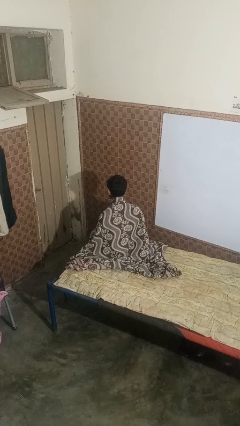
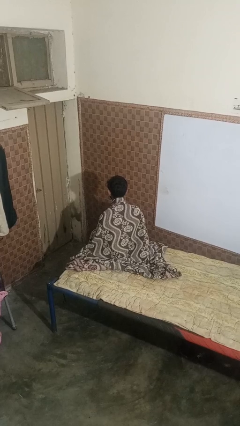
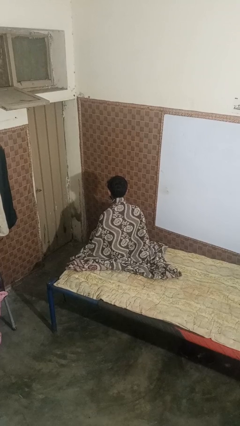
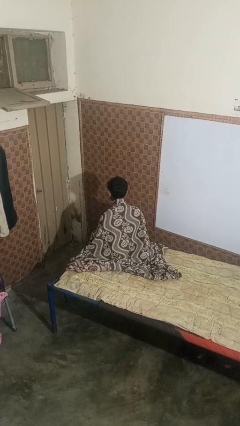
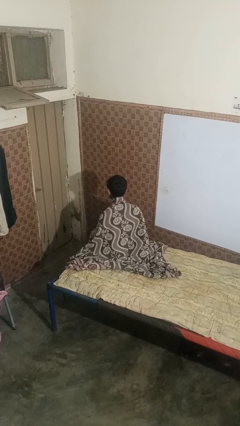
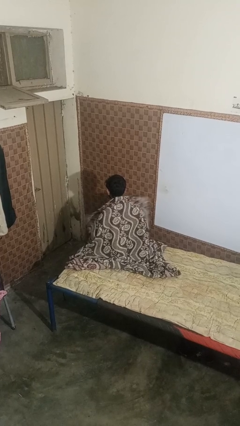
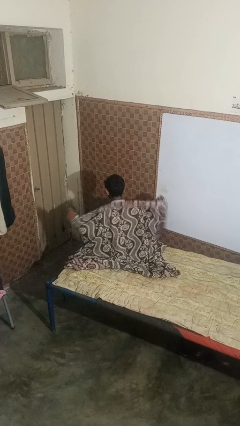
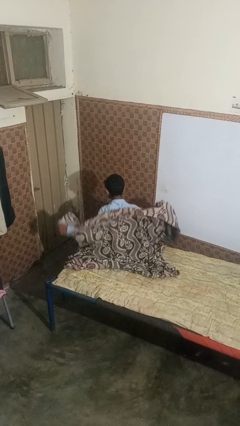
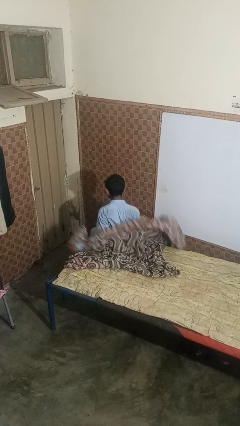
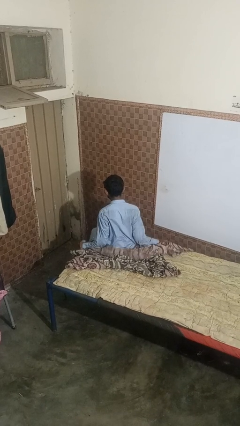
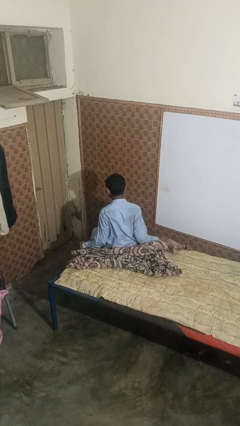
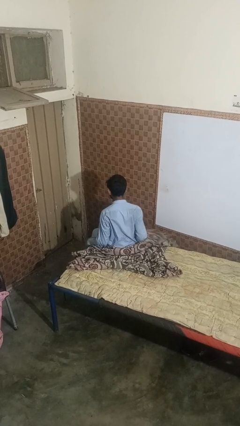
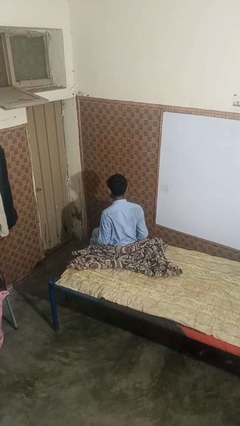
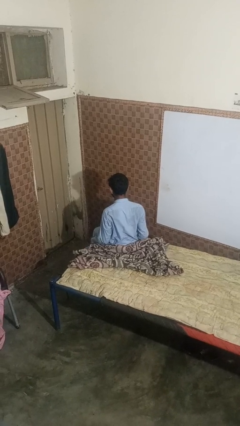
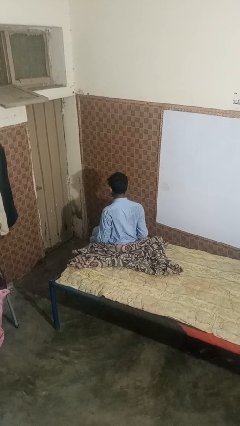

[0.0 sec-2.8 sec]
person uncovers with bedsheets

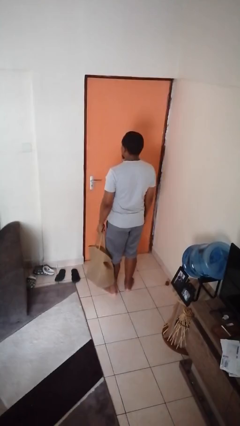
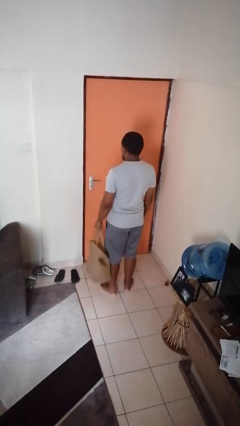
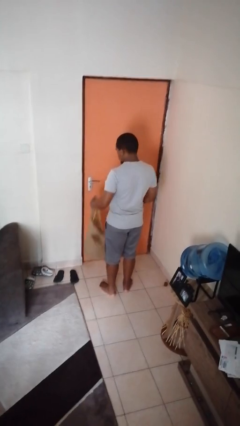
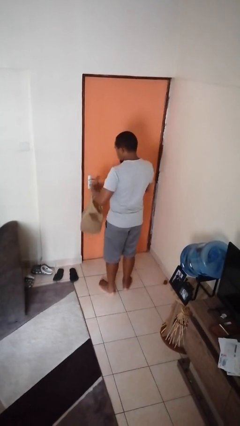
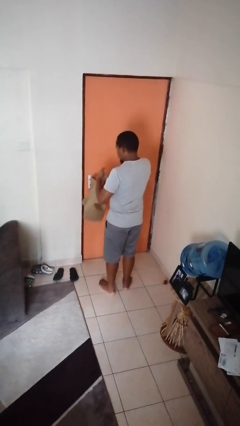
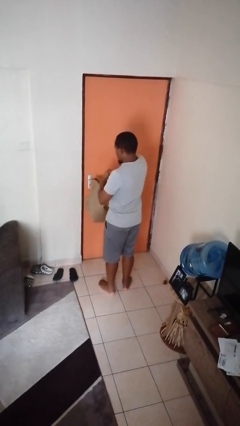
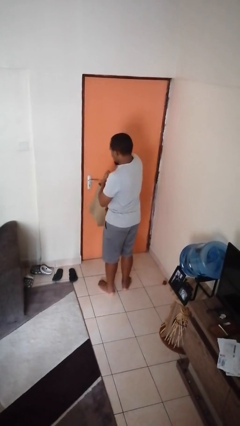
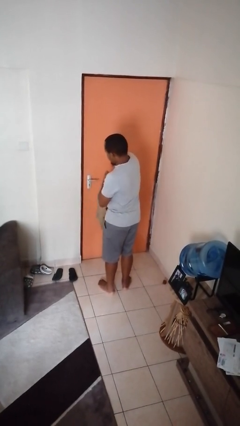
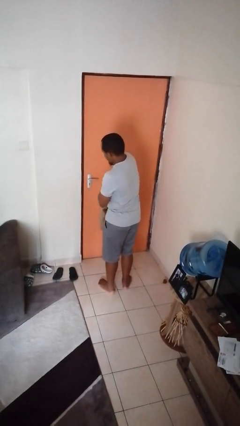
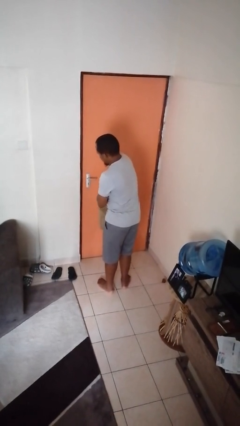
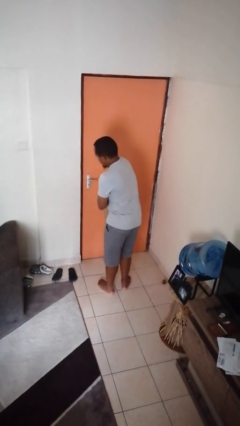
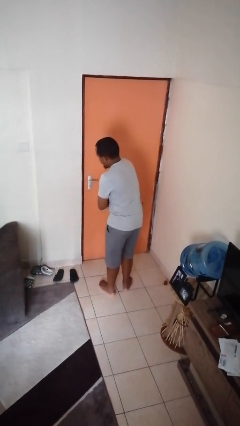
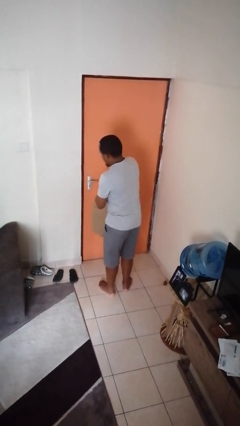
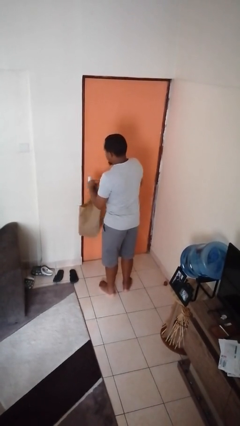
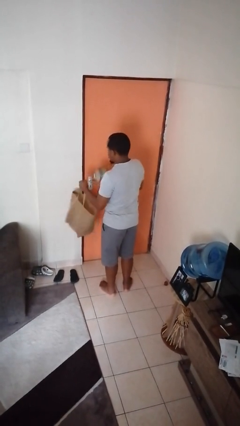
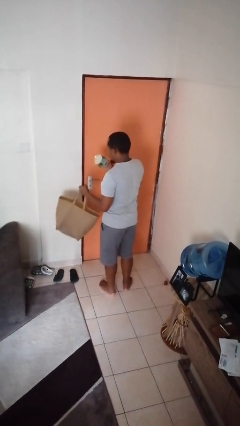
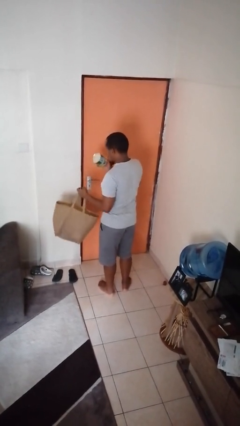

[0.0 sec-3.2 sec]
person takes object from bag

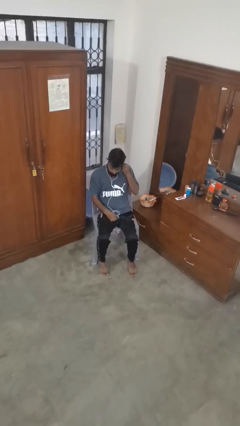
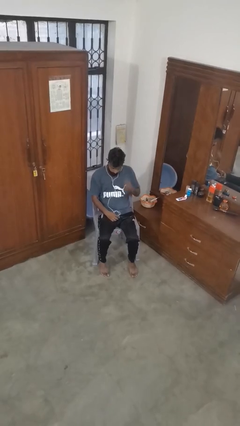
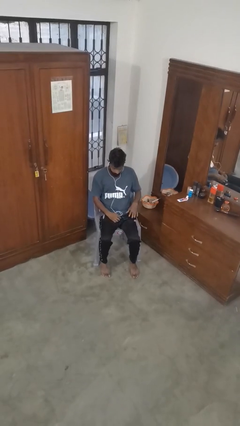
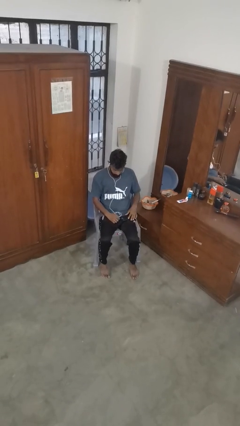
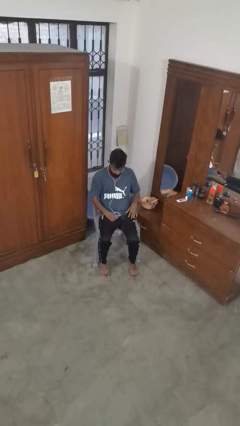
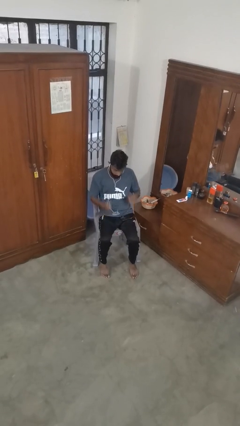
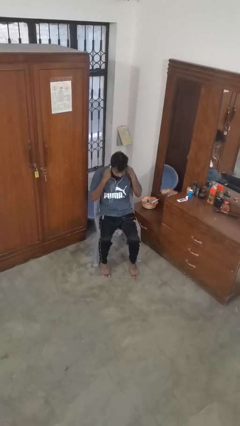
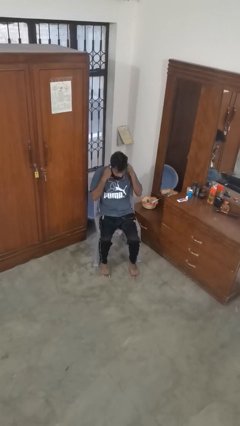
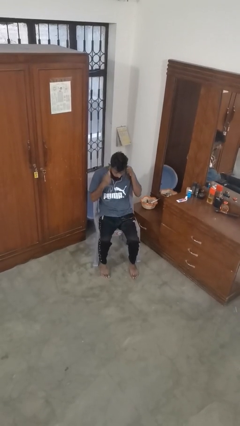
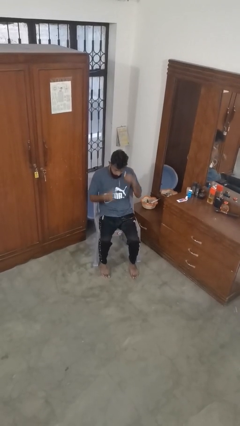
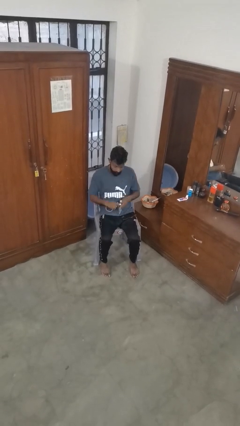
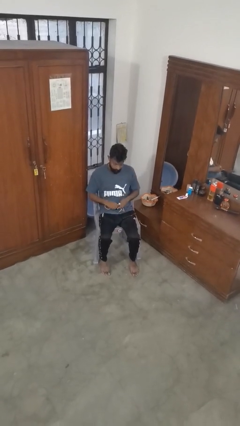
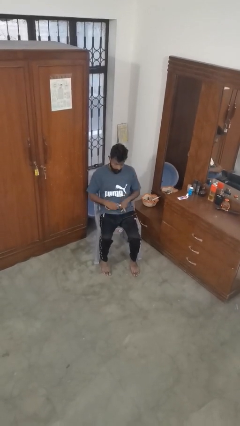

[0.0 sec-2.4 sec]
person takes off headphones

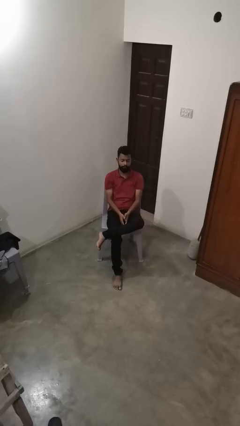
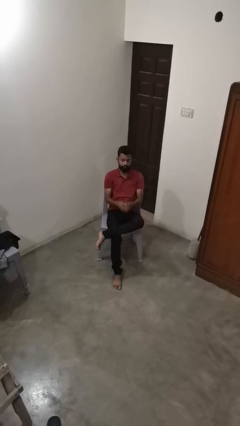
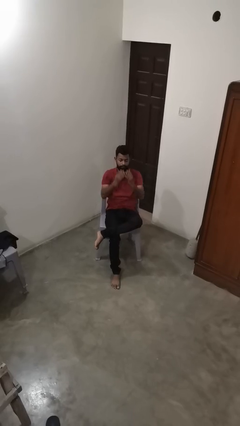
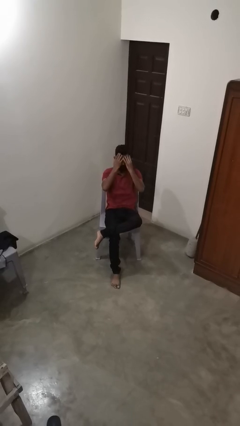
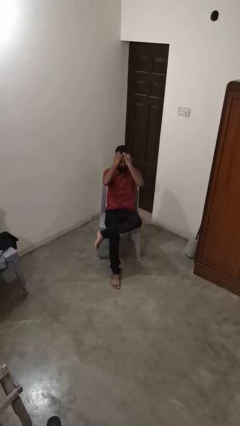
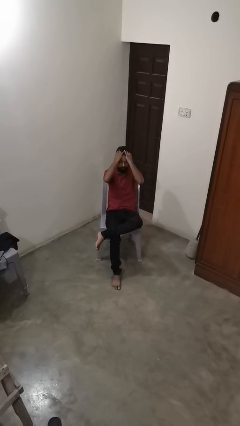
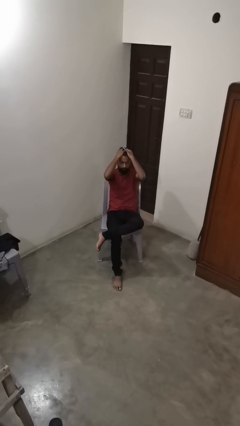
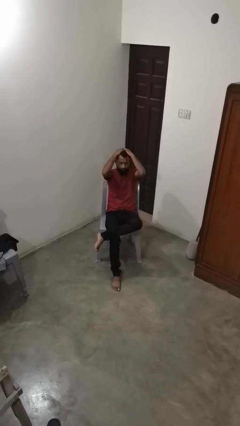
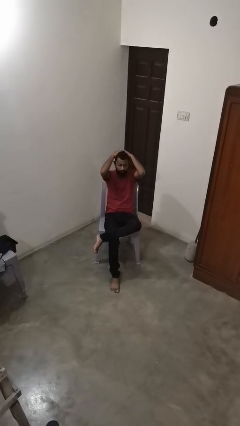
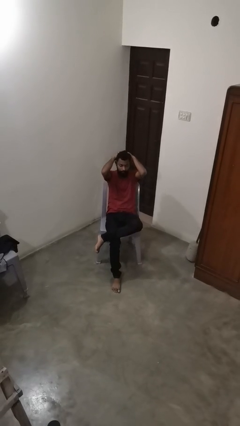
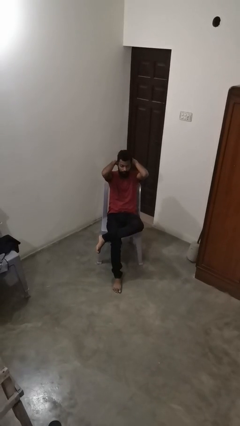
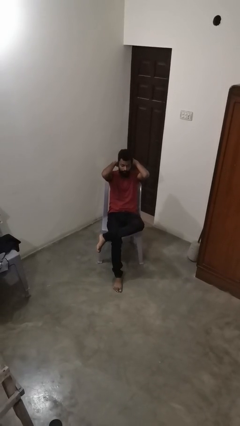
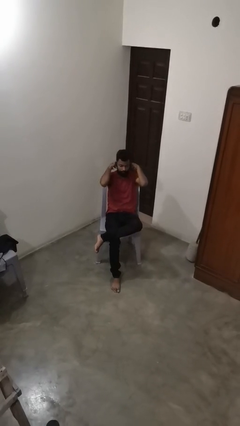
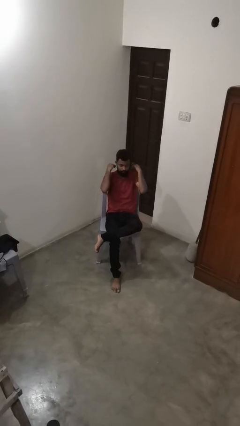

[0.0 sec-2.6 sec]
person strokes hair

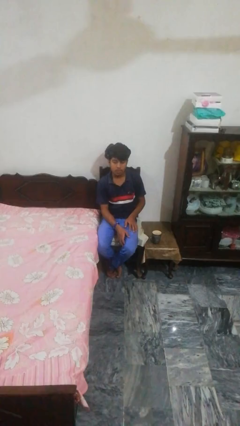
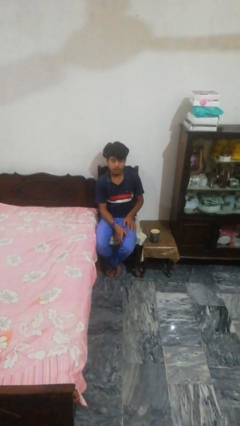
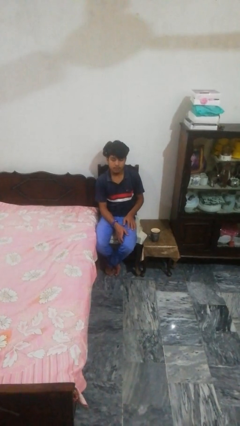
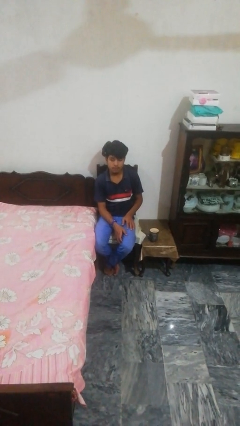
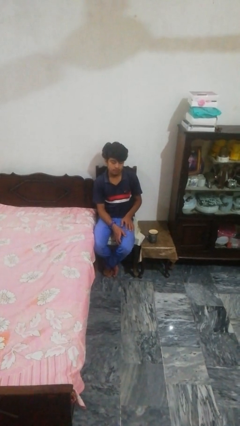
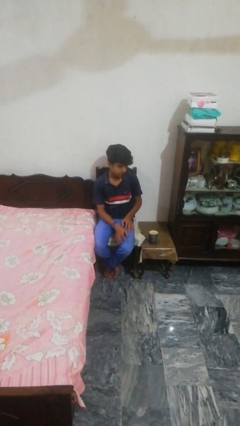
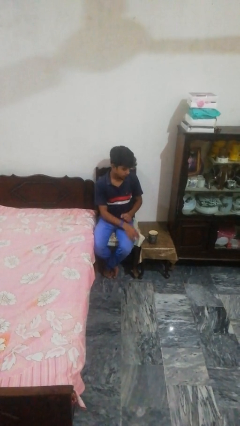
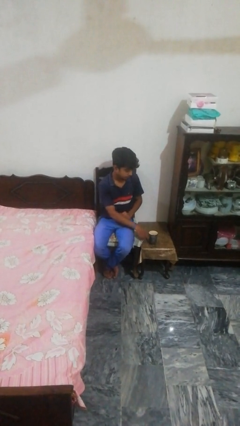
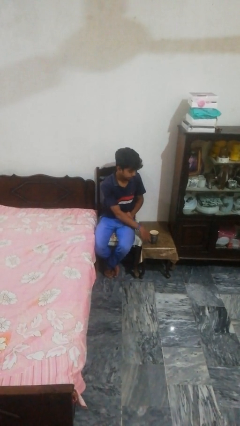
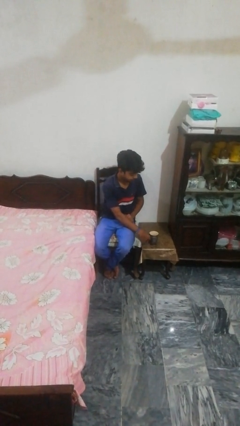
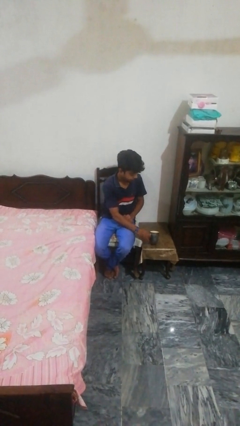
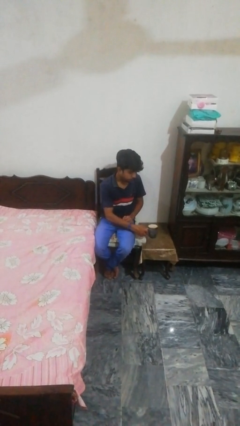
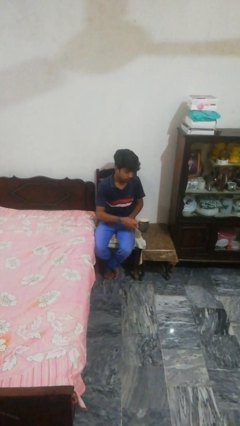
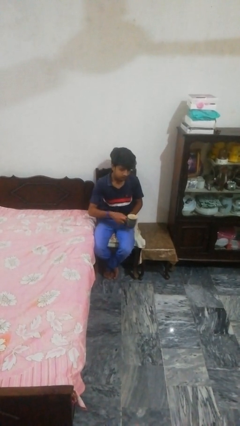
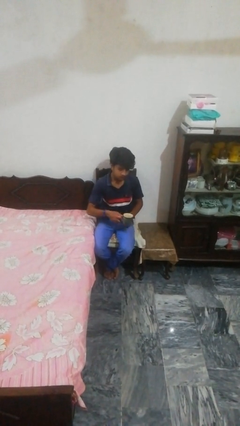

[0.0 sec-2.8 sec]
person picks up object from table

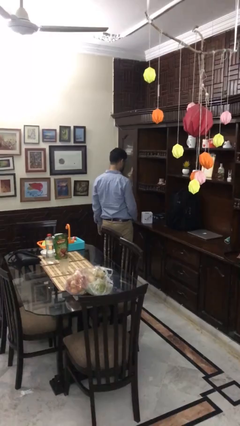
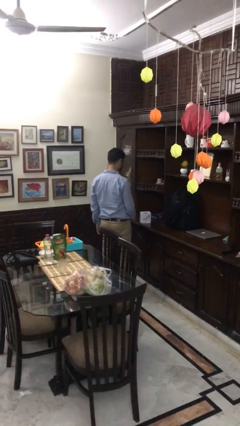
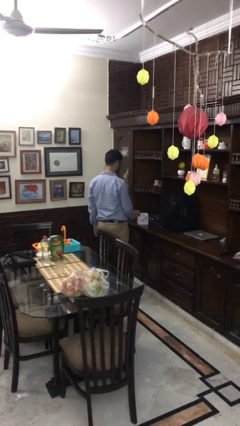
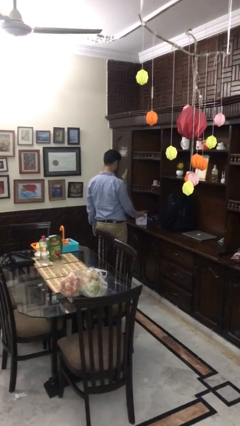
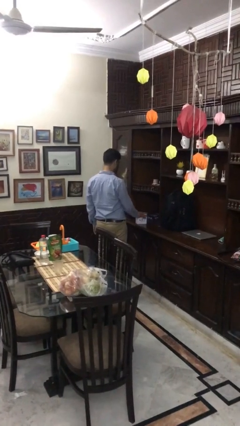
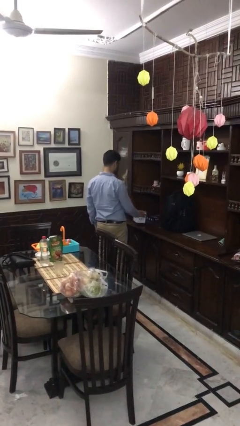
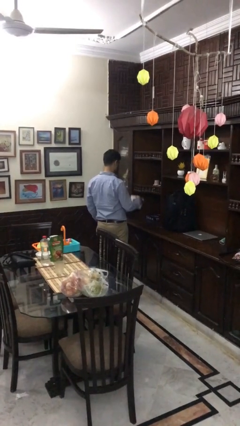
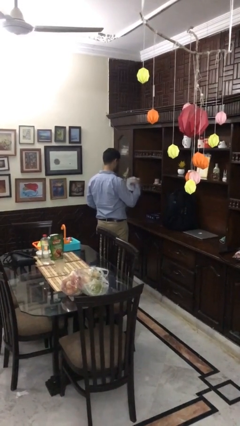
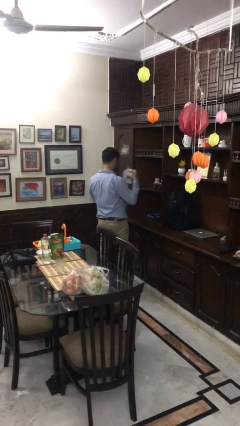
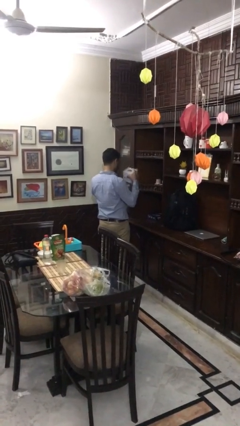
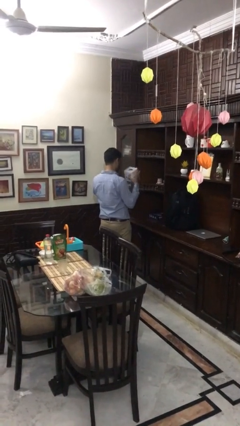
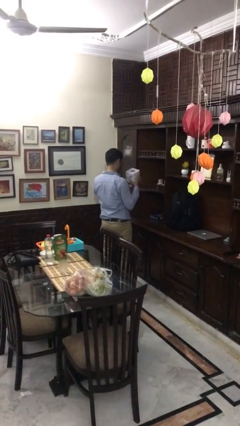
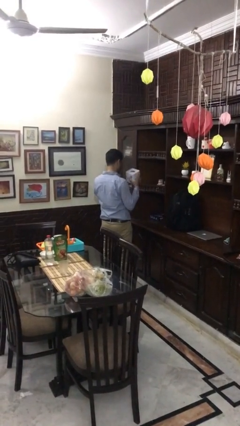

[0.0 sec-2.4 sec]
person picks up object from countertop

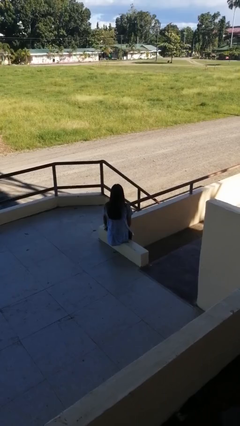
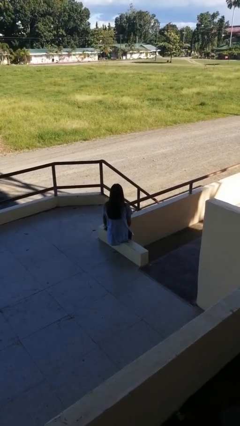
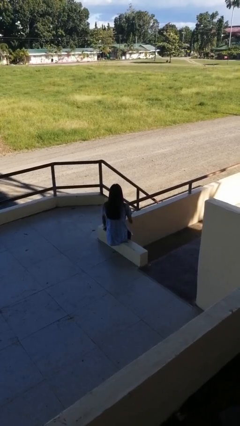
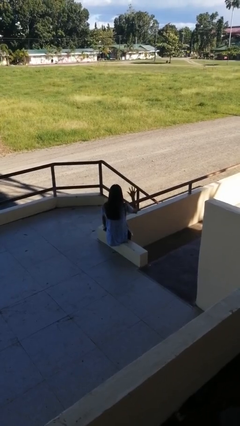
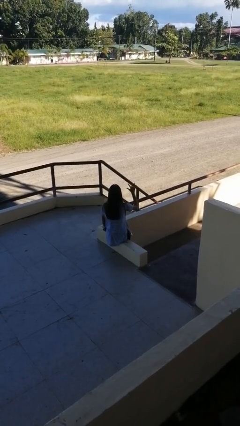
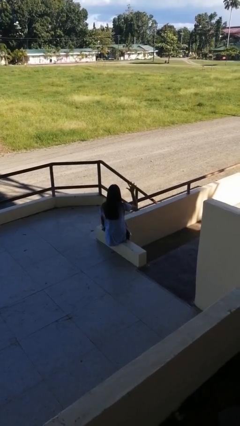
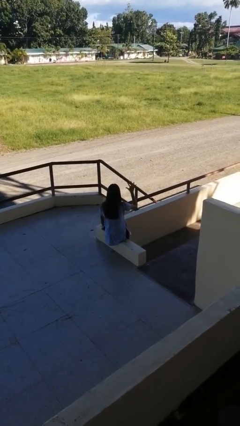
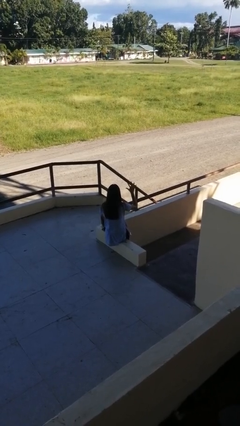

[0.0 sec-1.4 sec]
person gestures number five
